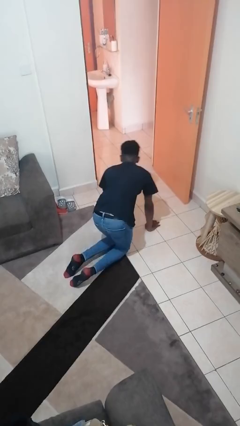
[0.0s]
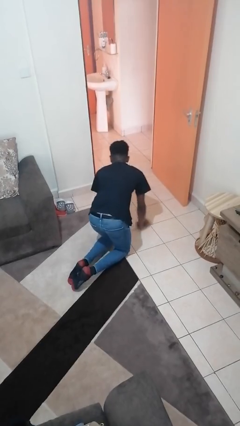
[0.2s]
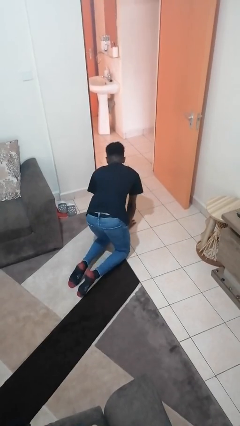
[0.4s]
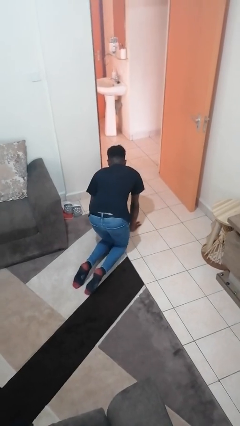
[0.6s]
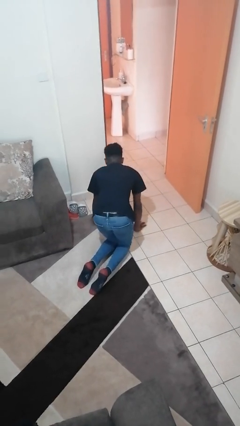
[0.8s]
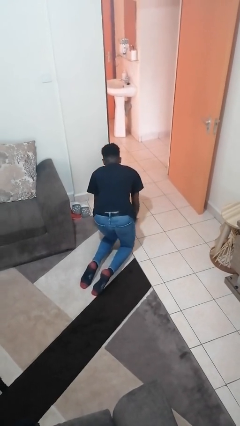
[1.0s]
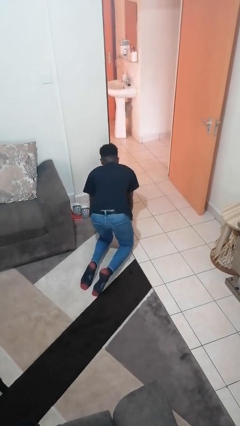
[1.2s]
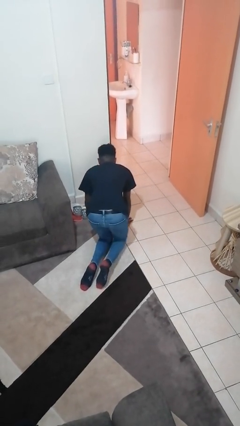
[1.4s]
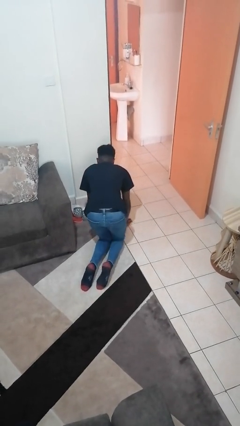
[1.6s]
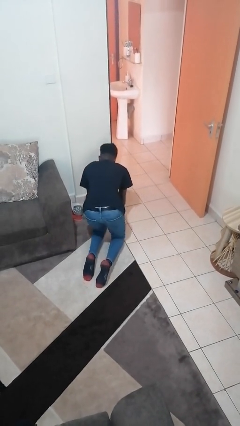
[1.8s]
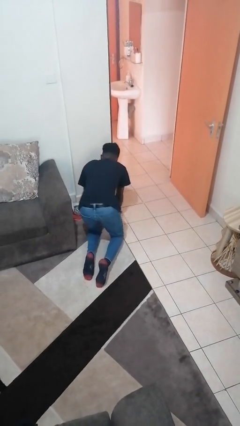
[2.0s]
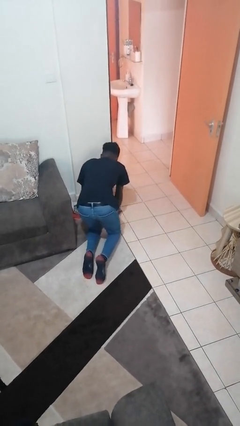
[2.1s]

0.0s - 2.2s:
person crawls

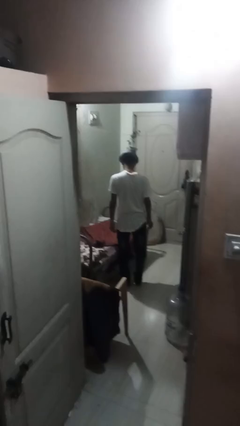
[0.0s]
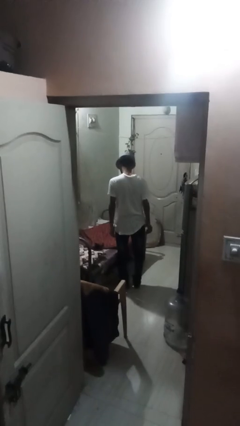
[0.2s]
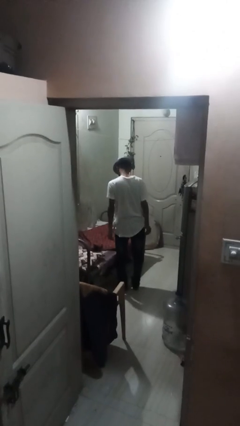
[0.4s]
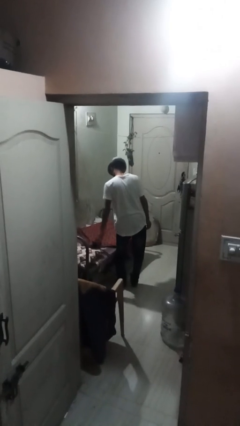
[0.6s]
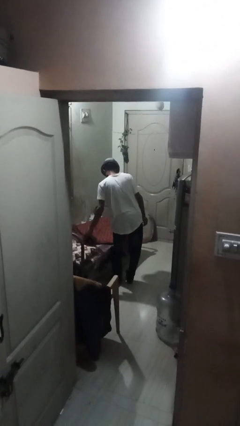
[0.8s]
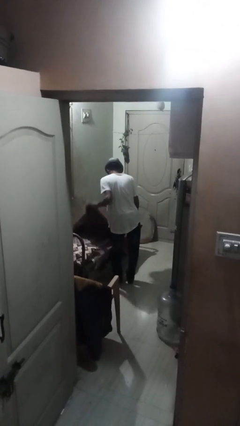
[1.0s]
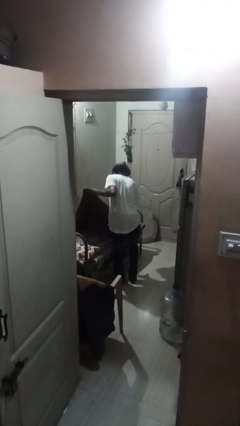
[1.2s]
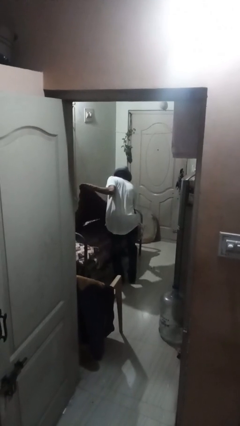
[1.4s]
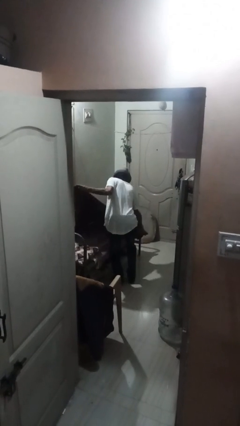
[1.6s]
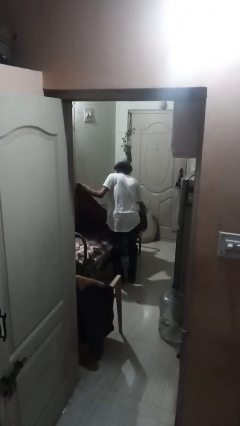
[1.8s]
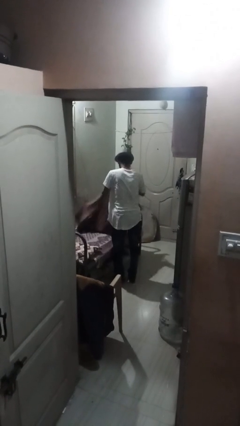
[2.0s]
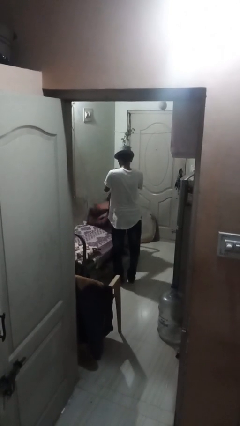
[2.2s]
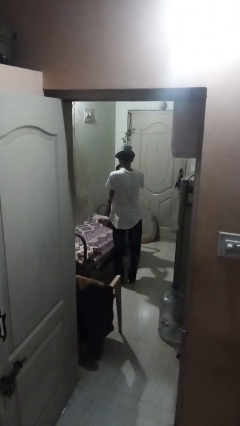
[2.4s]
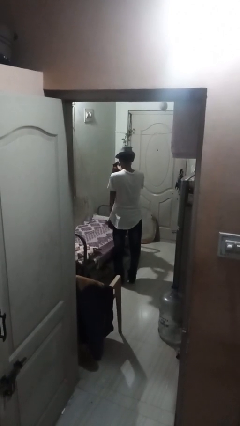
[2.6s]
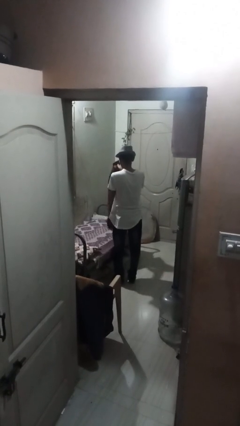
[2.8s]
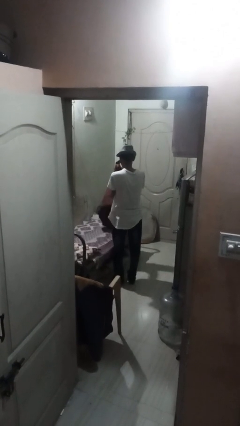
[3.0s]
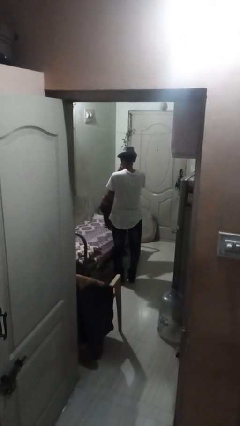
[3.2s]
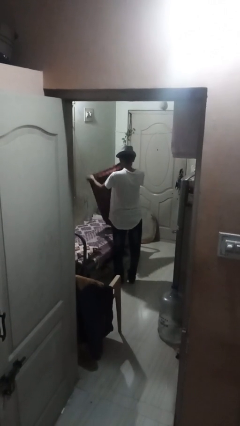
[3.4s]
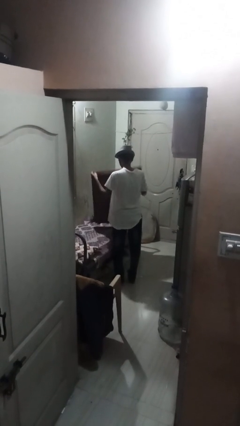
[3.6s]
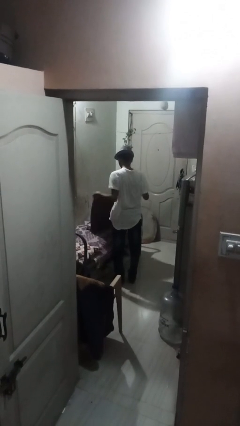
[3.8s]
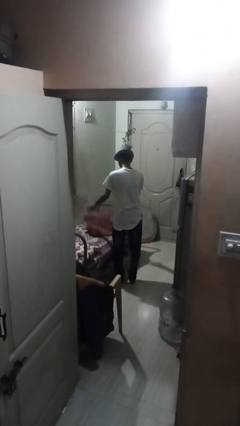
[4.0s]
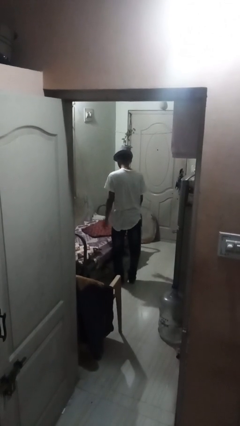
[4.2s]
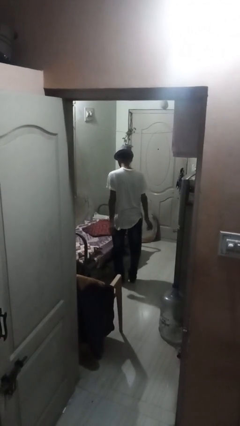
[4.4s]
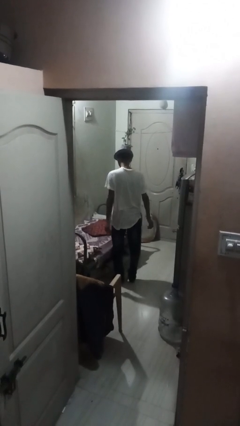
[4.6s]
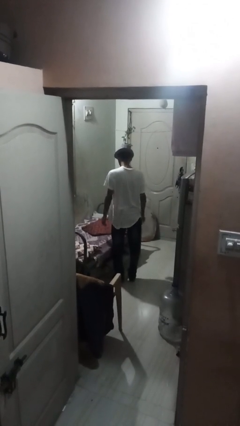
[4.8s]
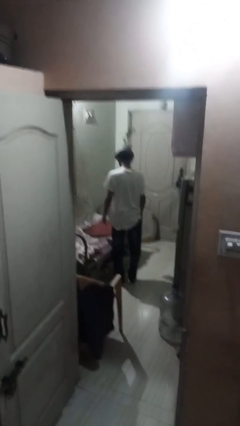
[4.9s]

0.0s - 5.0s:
person folds blanket

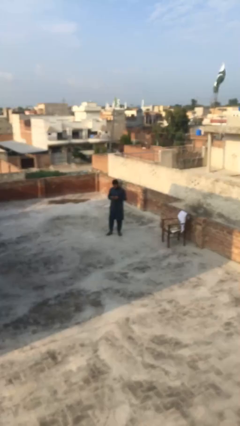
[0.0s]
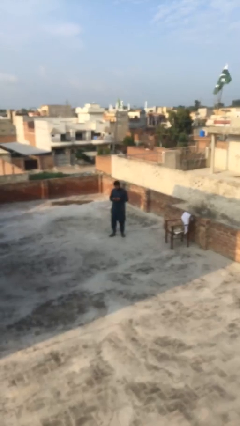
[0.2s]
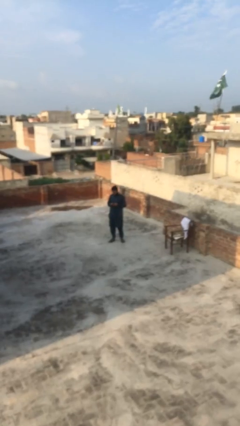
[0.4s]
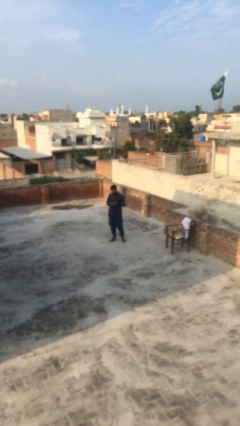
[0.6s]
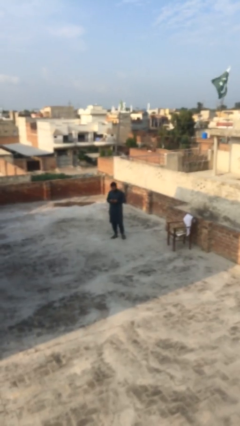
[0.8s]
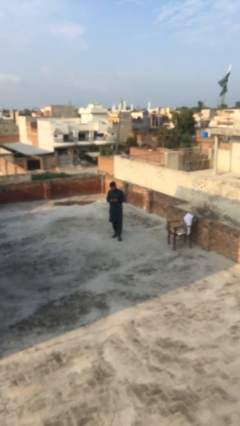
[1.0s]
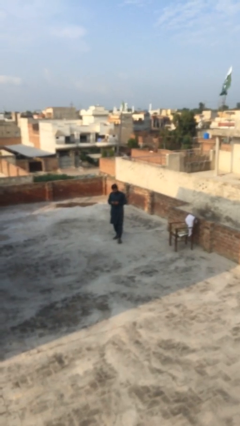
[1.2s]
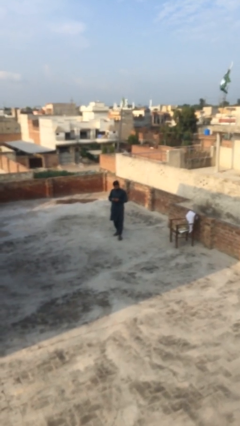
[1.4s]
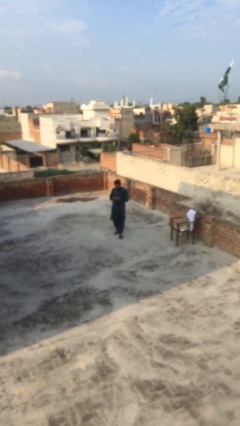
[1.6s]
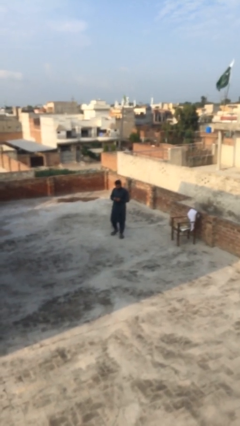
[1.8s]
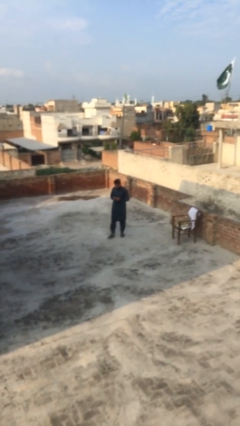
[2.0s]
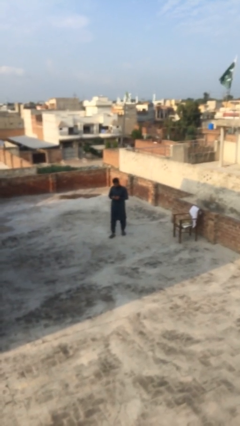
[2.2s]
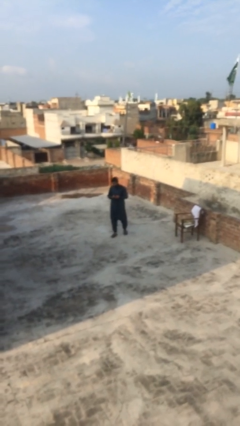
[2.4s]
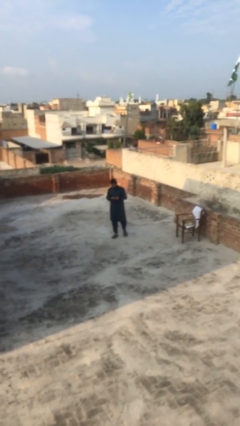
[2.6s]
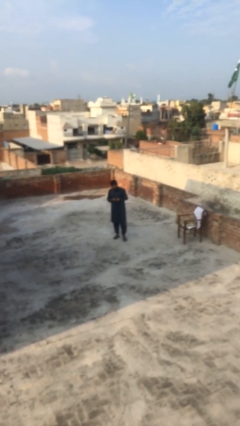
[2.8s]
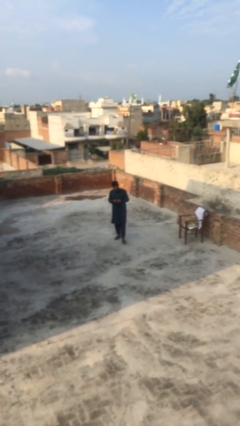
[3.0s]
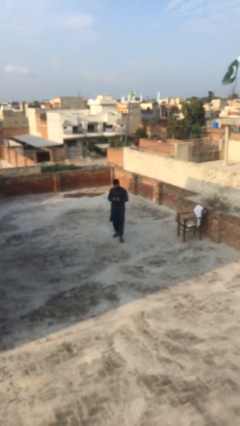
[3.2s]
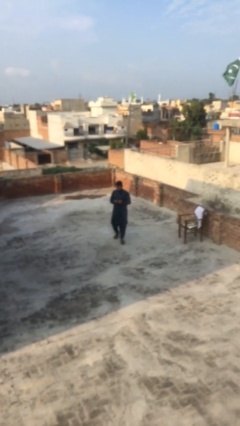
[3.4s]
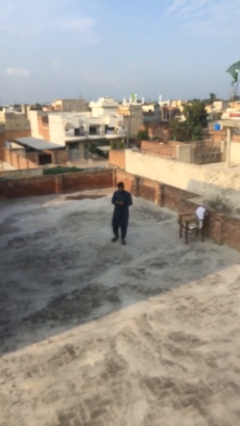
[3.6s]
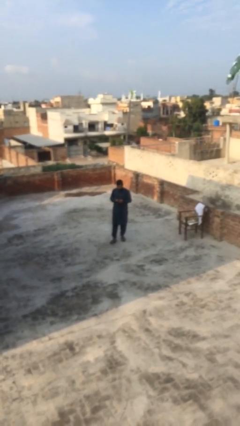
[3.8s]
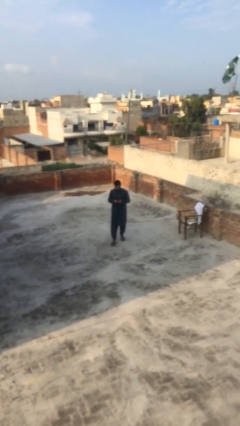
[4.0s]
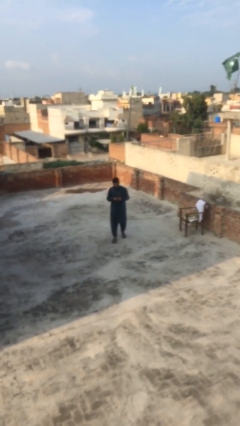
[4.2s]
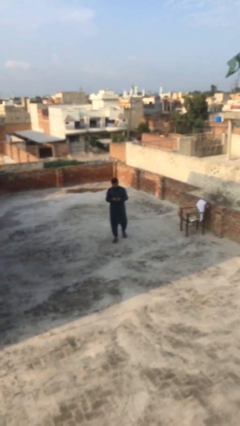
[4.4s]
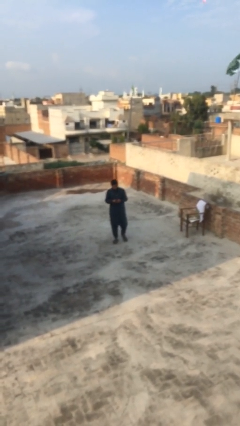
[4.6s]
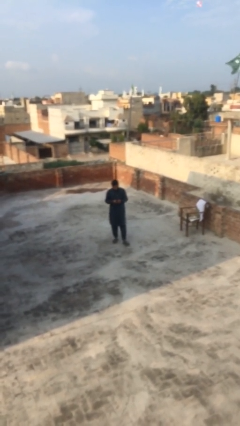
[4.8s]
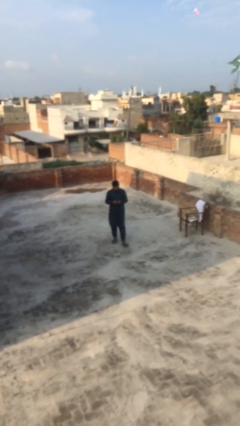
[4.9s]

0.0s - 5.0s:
person texts on phone

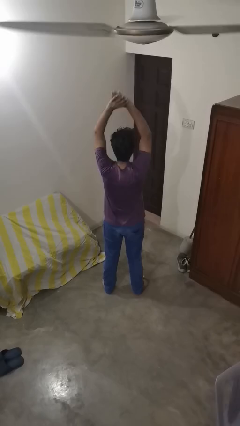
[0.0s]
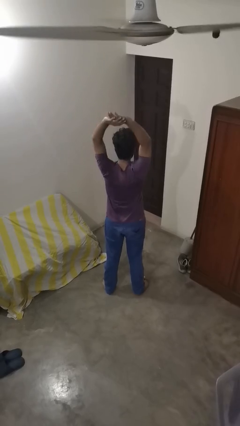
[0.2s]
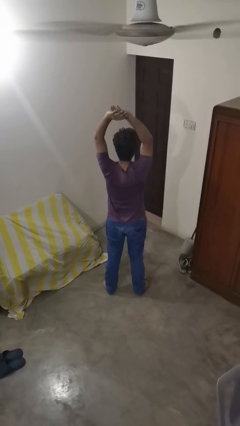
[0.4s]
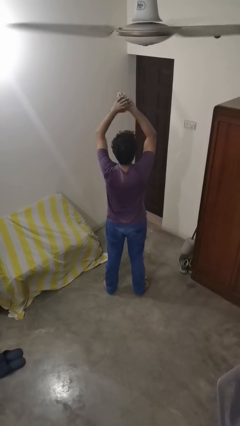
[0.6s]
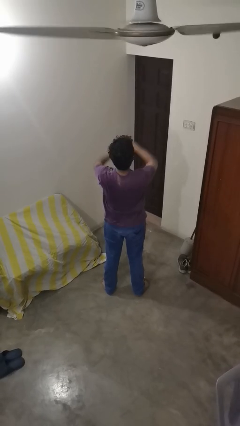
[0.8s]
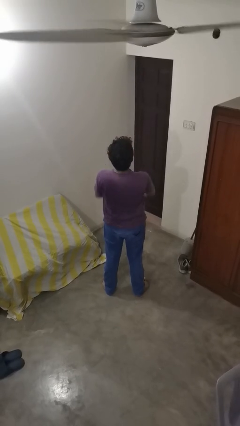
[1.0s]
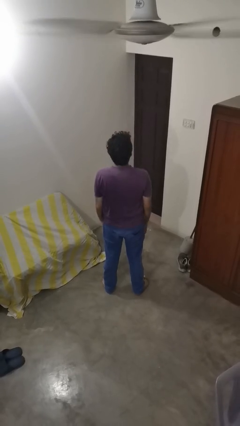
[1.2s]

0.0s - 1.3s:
person stretches arms over head

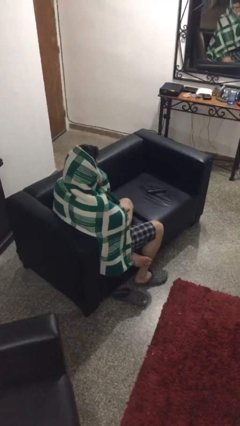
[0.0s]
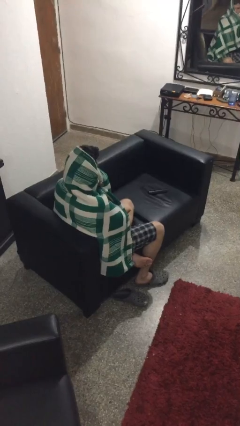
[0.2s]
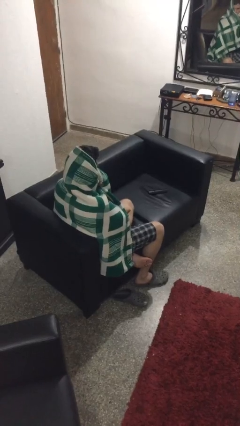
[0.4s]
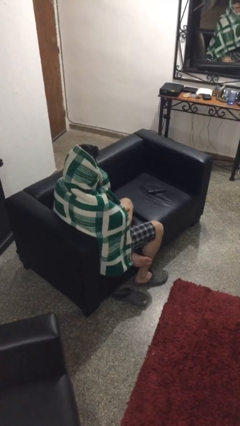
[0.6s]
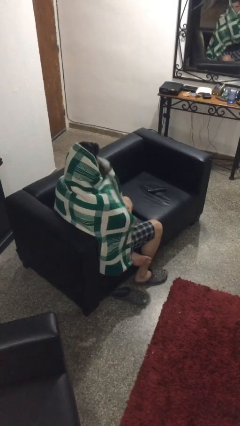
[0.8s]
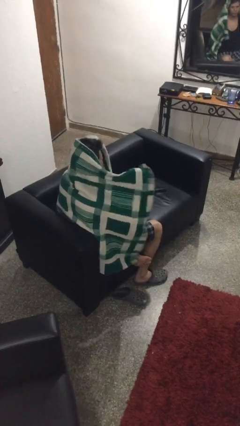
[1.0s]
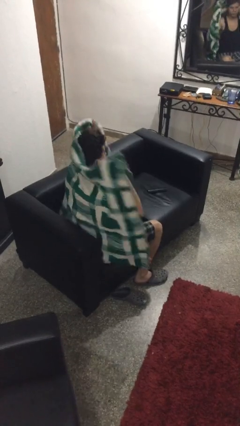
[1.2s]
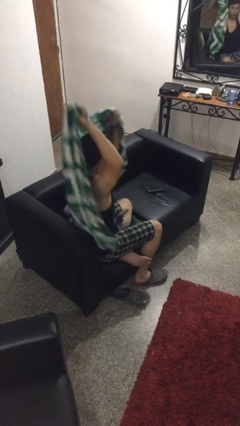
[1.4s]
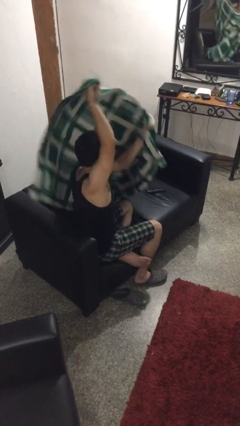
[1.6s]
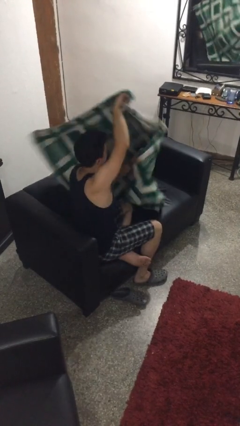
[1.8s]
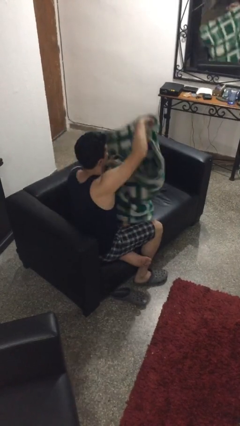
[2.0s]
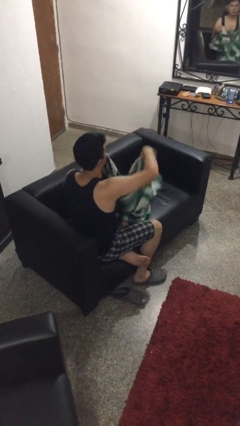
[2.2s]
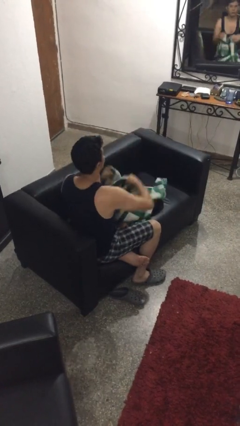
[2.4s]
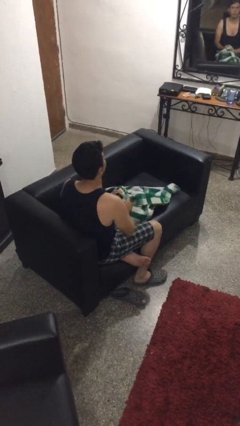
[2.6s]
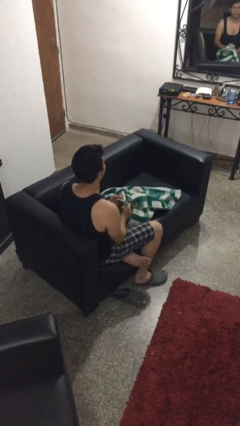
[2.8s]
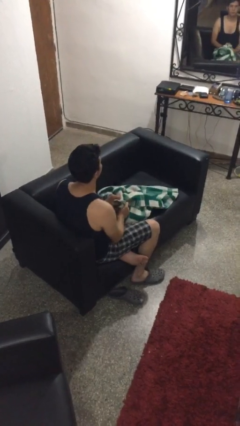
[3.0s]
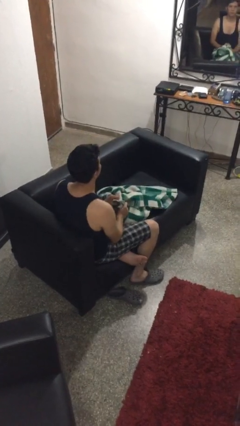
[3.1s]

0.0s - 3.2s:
person uncovers with blanket

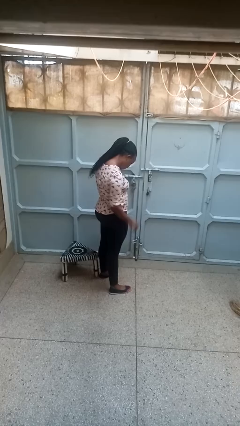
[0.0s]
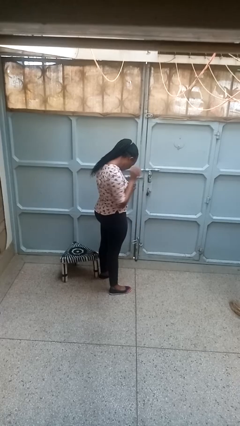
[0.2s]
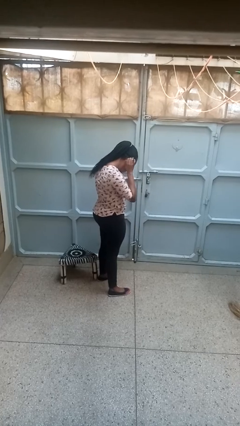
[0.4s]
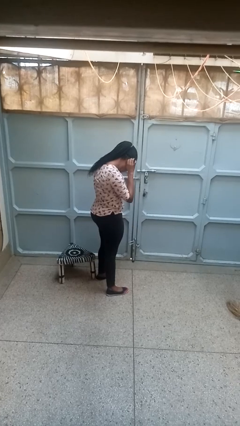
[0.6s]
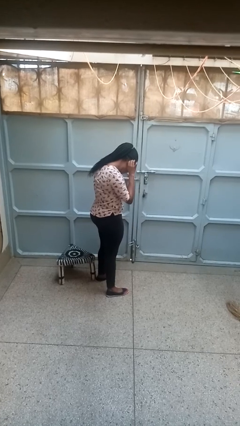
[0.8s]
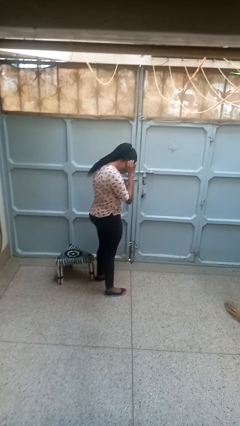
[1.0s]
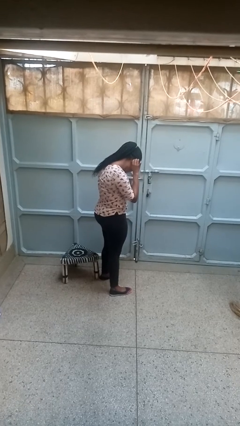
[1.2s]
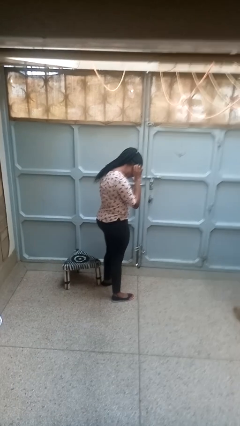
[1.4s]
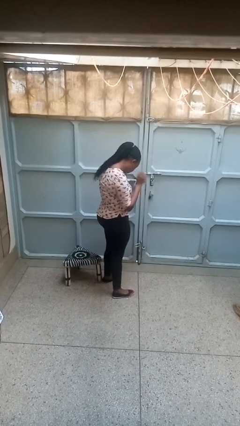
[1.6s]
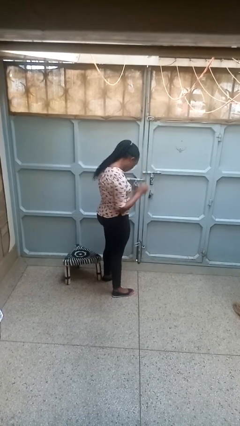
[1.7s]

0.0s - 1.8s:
person gestures listen closely
